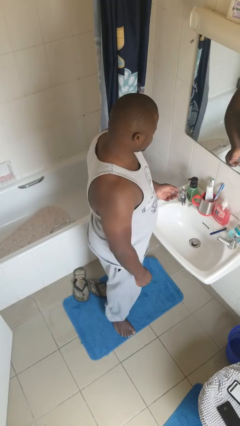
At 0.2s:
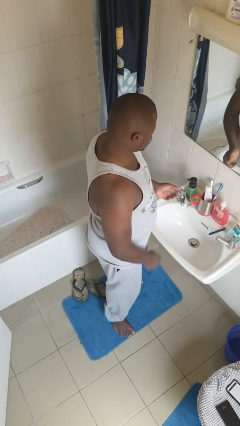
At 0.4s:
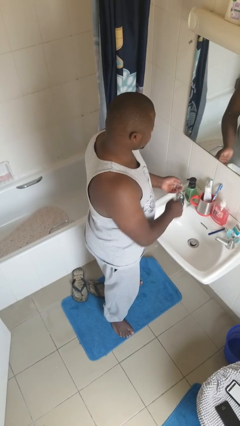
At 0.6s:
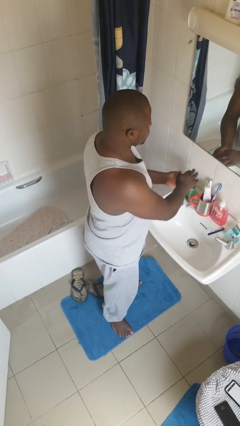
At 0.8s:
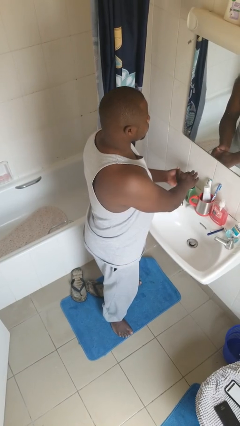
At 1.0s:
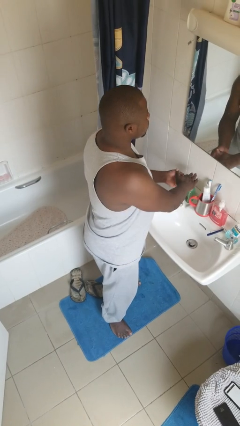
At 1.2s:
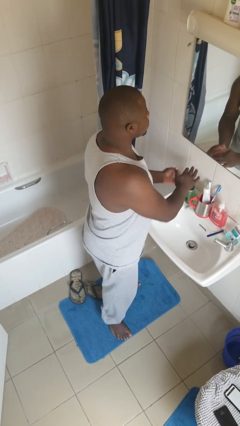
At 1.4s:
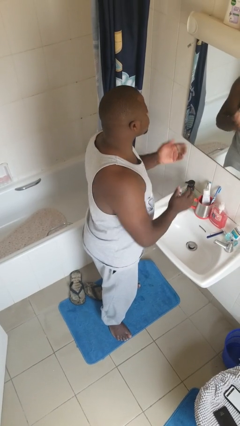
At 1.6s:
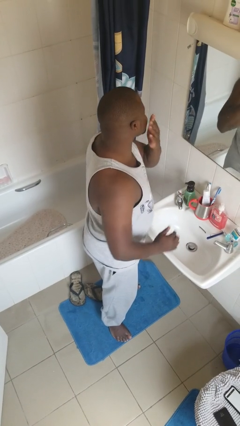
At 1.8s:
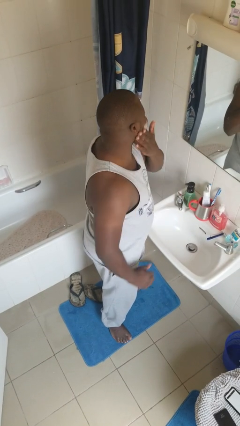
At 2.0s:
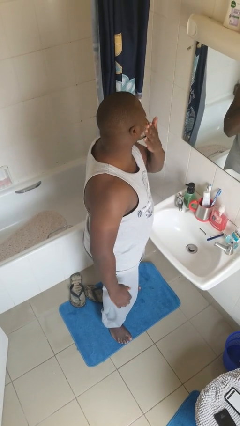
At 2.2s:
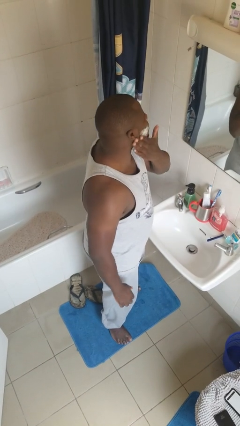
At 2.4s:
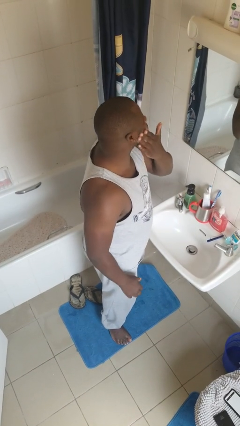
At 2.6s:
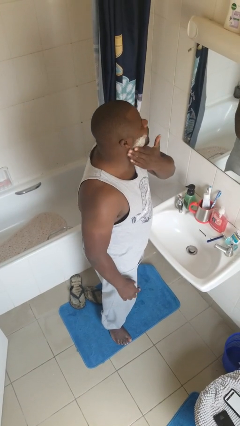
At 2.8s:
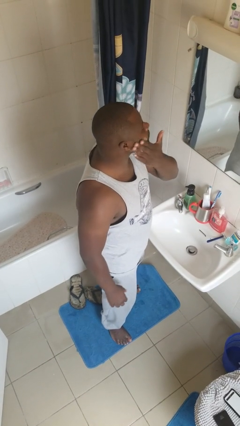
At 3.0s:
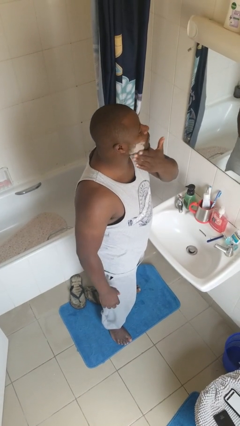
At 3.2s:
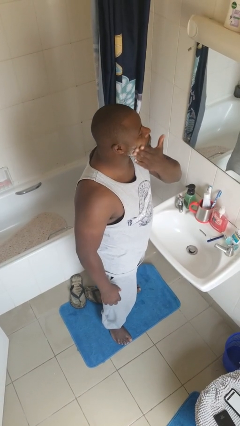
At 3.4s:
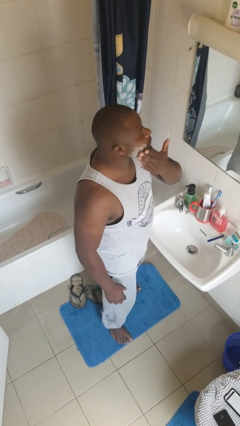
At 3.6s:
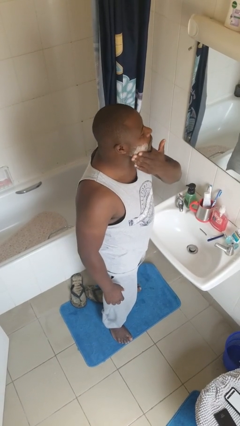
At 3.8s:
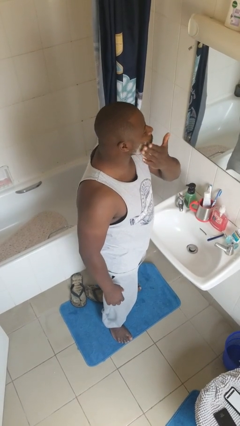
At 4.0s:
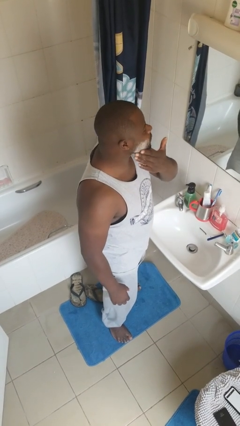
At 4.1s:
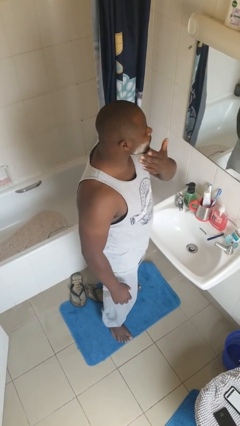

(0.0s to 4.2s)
person applies shaving cream

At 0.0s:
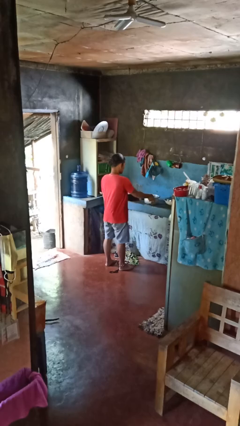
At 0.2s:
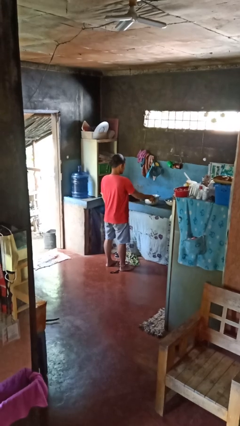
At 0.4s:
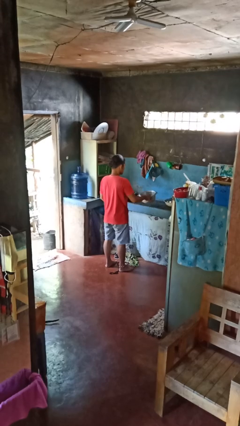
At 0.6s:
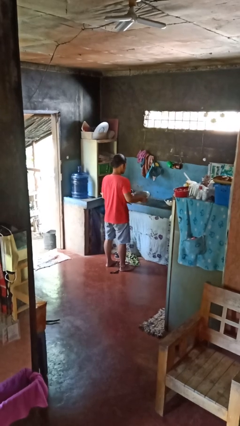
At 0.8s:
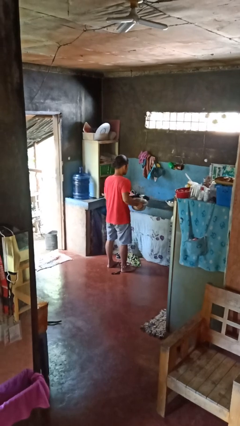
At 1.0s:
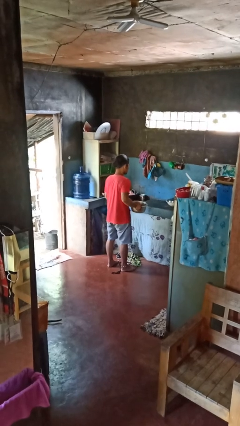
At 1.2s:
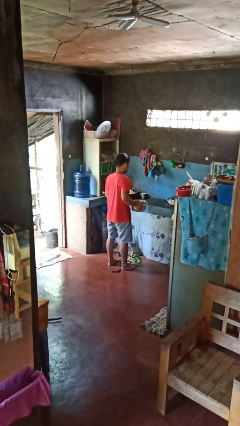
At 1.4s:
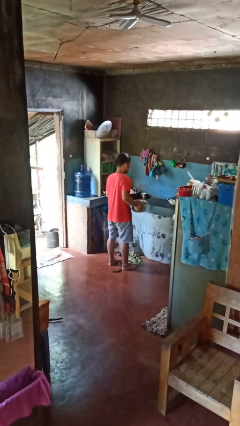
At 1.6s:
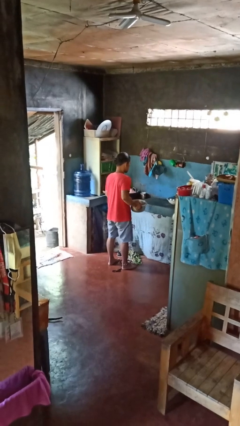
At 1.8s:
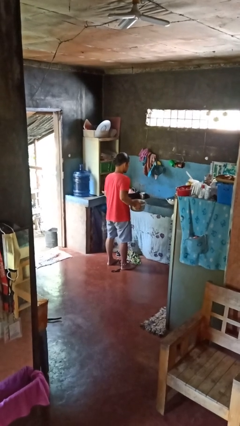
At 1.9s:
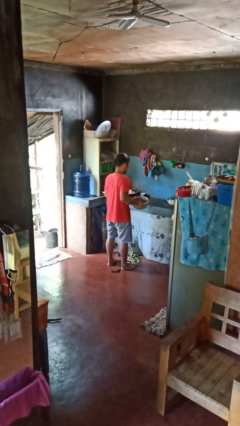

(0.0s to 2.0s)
person picks up object from countertop

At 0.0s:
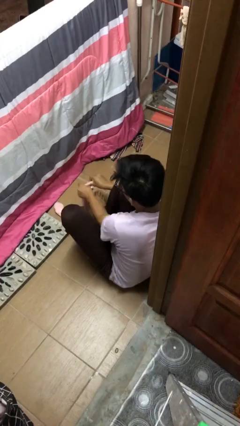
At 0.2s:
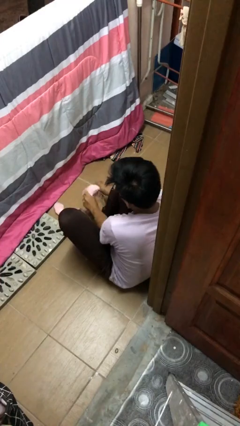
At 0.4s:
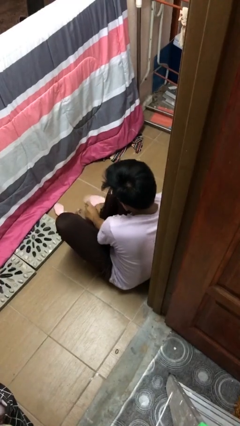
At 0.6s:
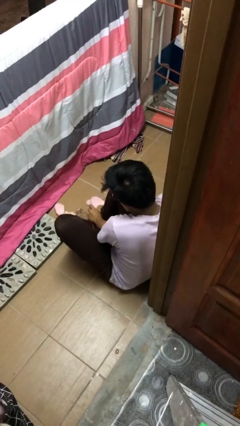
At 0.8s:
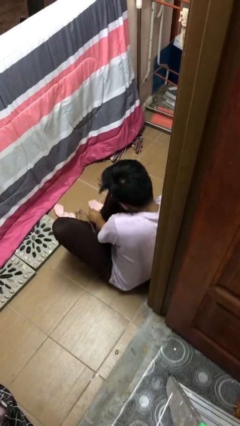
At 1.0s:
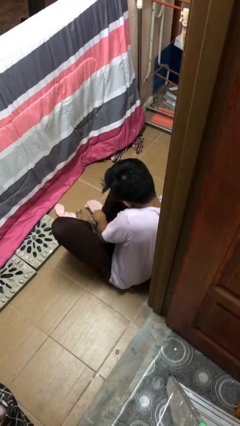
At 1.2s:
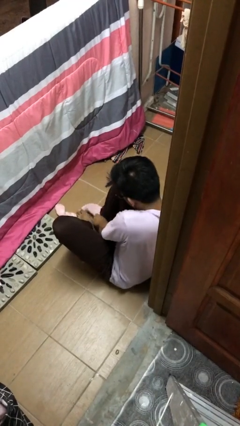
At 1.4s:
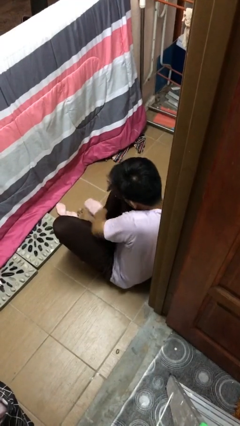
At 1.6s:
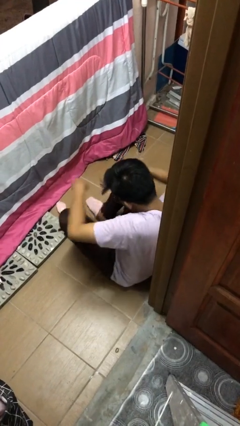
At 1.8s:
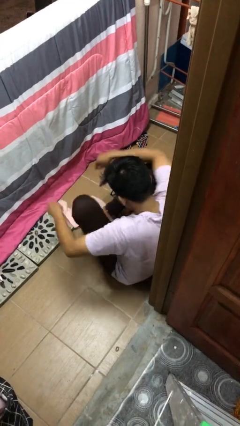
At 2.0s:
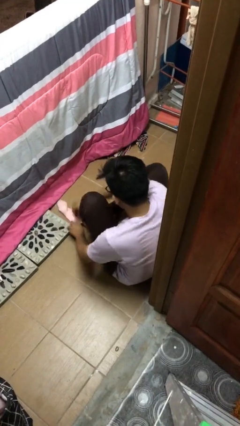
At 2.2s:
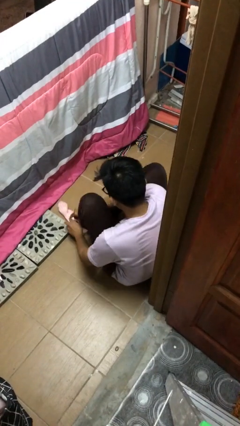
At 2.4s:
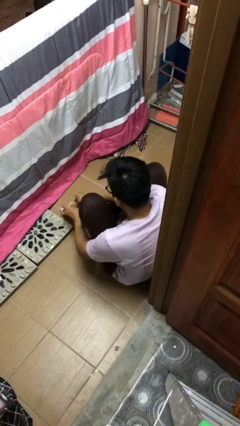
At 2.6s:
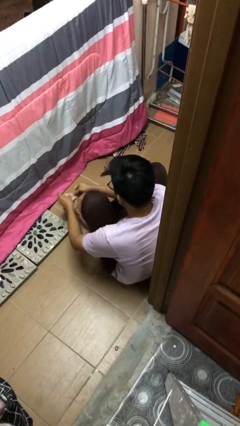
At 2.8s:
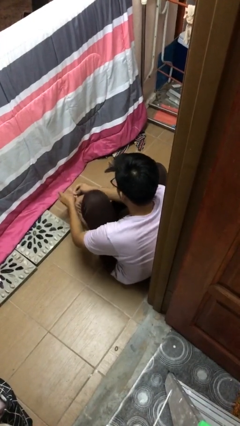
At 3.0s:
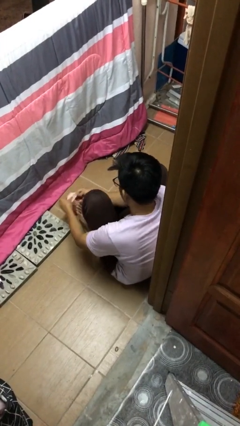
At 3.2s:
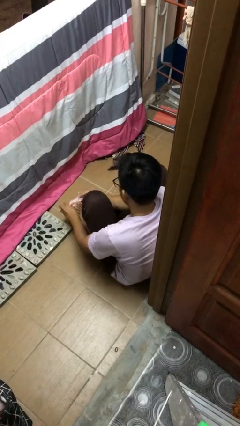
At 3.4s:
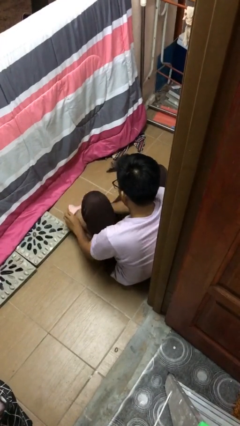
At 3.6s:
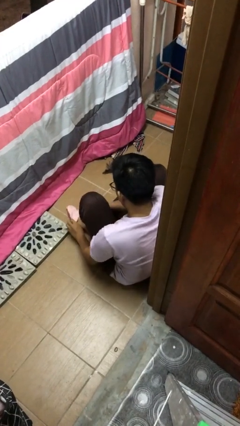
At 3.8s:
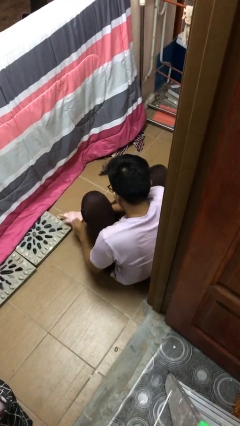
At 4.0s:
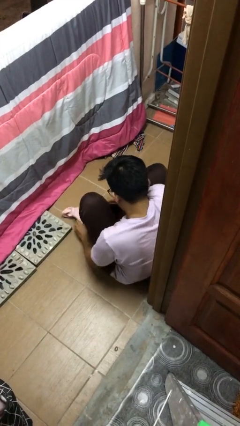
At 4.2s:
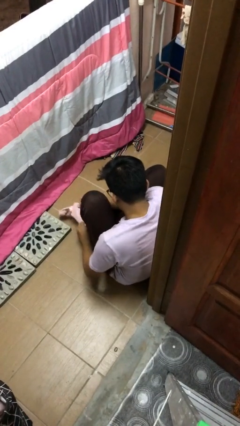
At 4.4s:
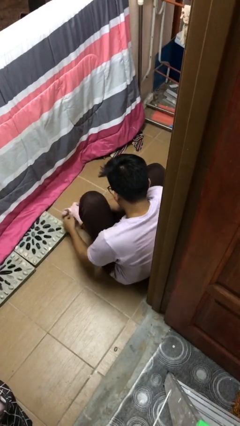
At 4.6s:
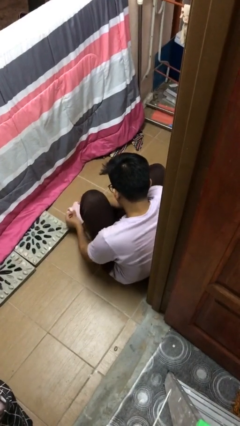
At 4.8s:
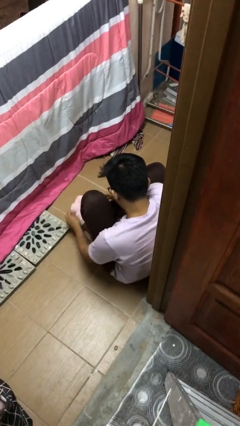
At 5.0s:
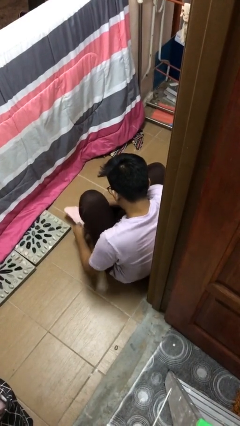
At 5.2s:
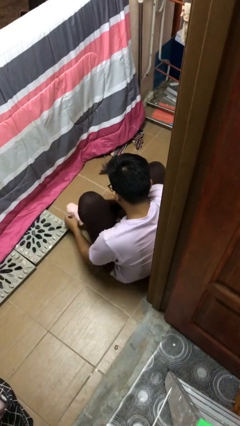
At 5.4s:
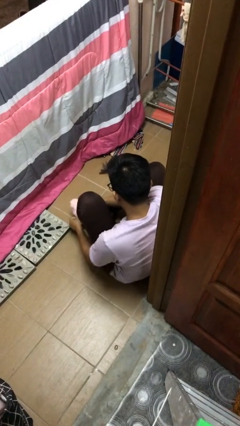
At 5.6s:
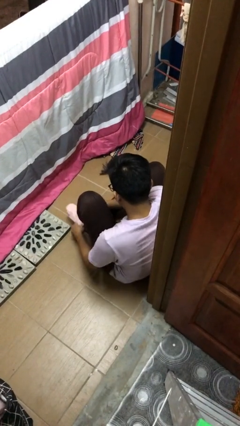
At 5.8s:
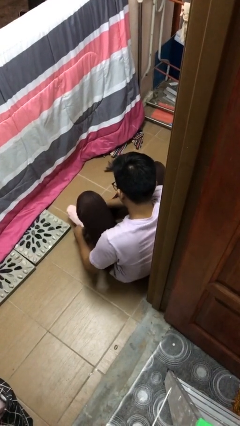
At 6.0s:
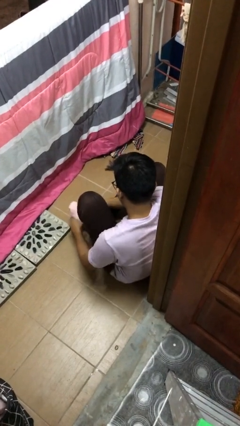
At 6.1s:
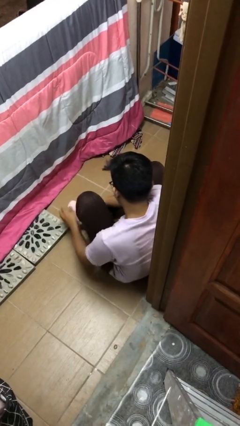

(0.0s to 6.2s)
person puts on socks

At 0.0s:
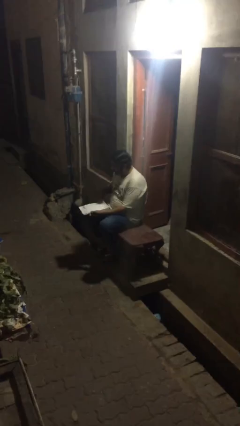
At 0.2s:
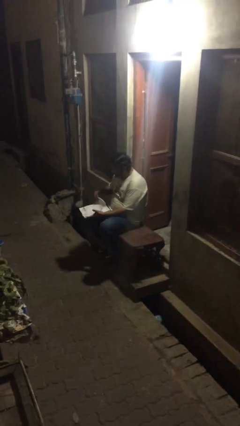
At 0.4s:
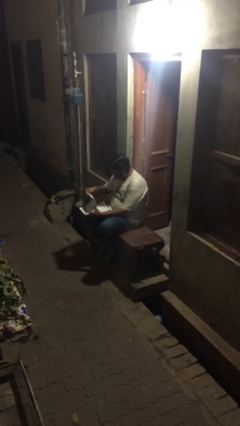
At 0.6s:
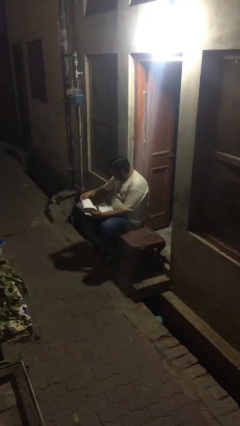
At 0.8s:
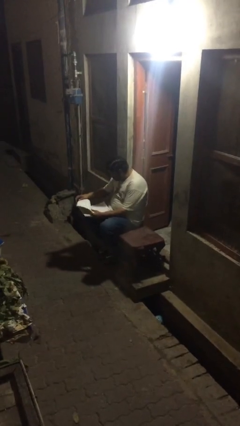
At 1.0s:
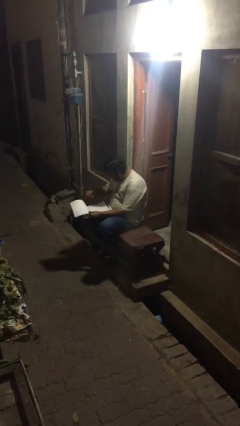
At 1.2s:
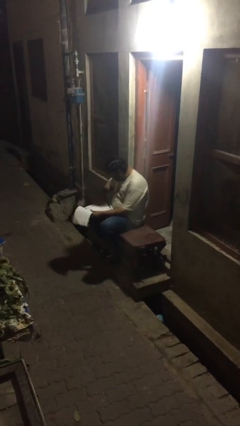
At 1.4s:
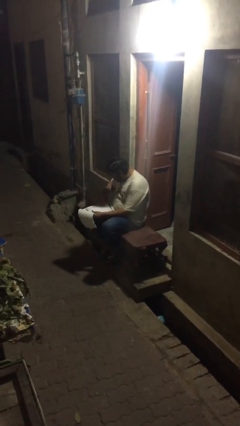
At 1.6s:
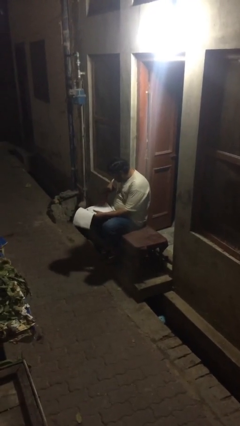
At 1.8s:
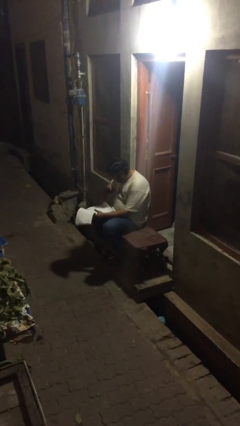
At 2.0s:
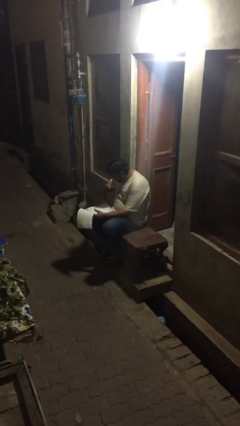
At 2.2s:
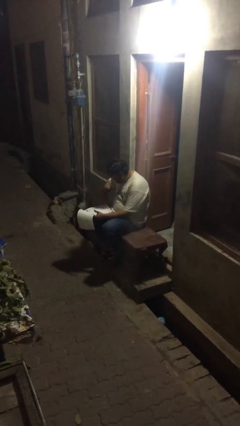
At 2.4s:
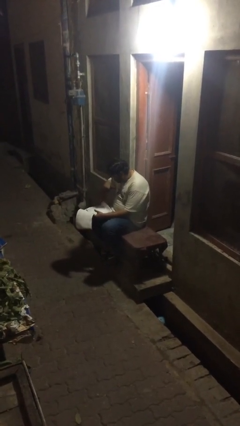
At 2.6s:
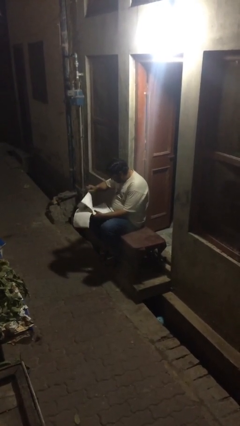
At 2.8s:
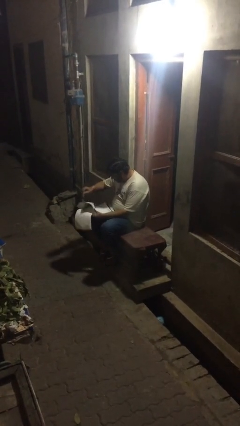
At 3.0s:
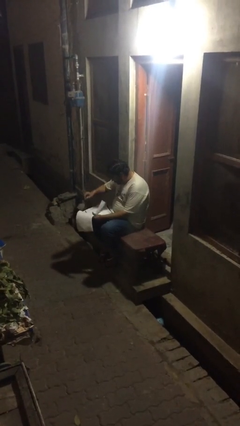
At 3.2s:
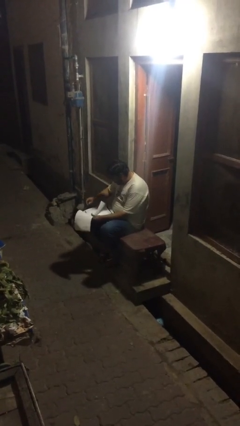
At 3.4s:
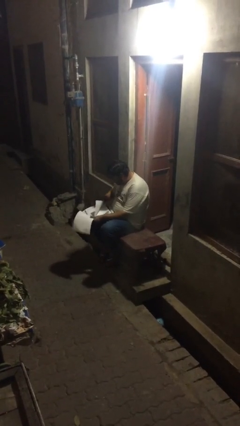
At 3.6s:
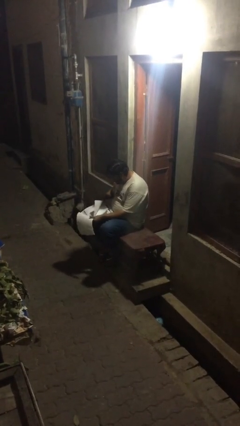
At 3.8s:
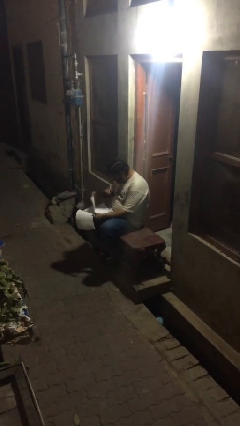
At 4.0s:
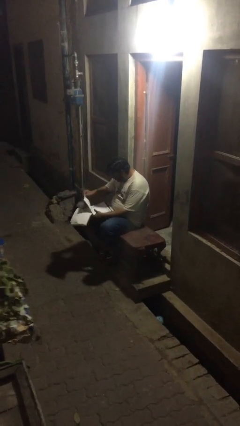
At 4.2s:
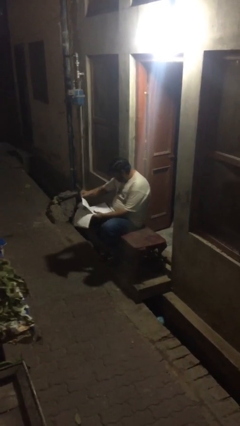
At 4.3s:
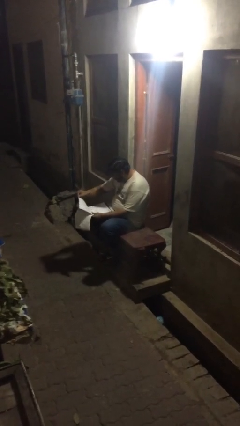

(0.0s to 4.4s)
person reads document

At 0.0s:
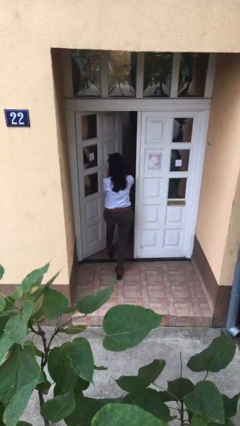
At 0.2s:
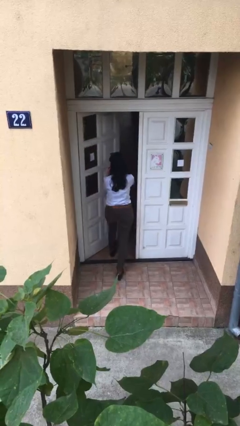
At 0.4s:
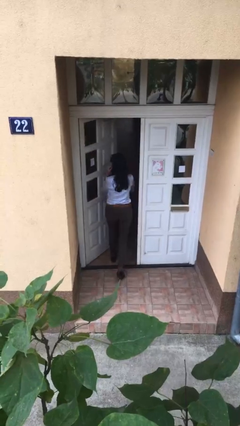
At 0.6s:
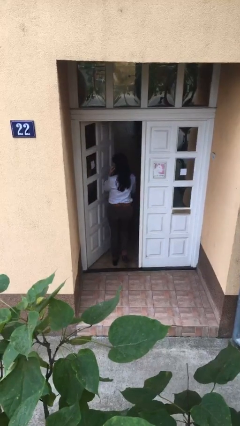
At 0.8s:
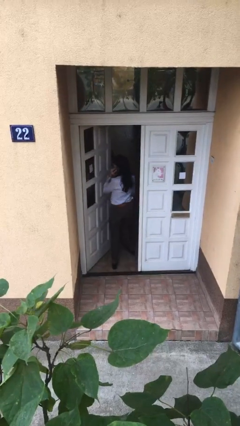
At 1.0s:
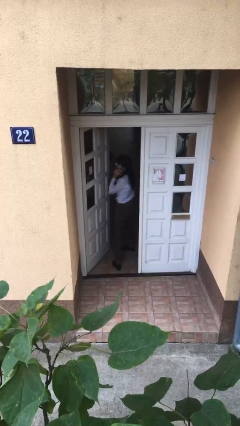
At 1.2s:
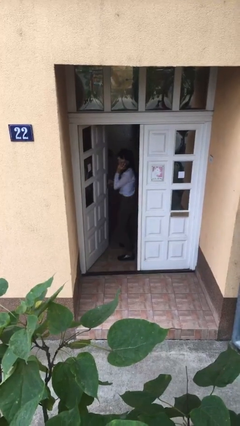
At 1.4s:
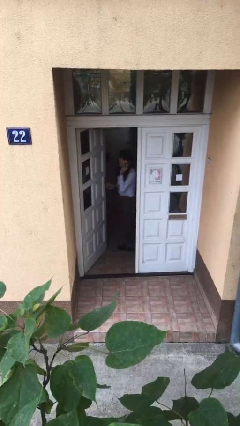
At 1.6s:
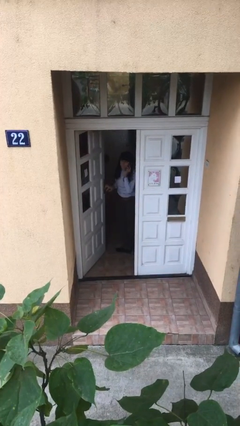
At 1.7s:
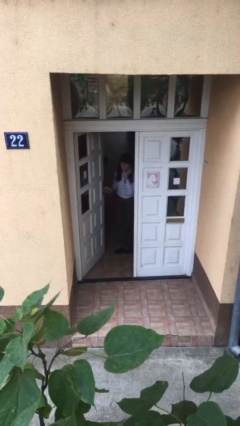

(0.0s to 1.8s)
person exits scene through structure
